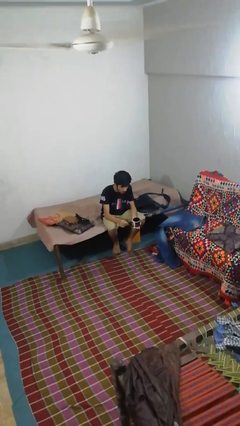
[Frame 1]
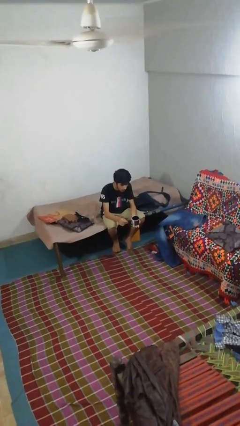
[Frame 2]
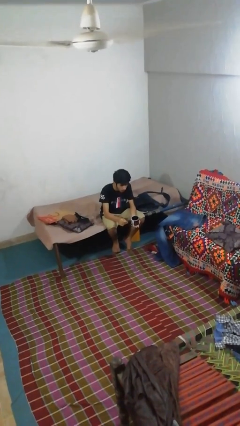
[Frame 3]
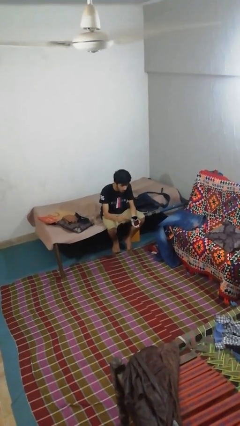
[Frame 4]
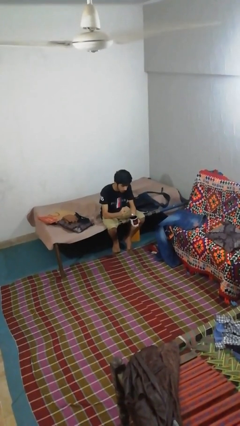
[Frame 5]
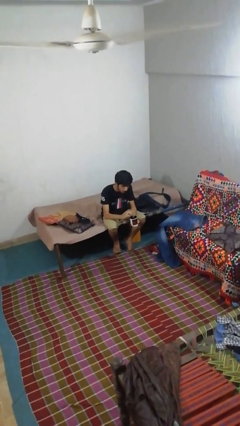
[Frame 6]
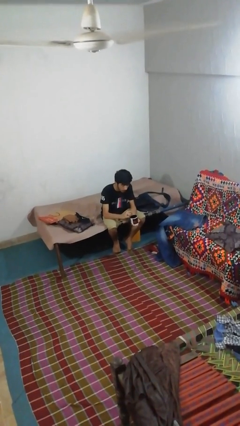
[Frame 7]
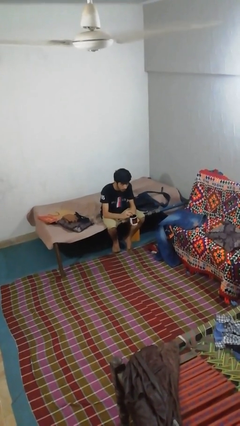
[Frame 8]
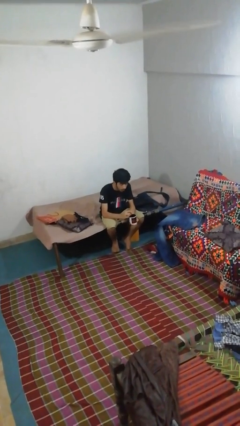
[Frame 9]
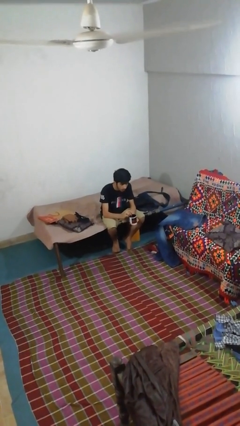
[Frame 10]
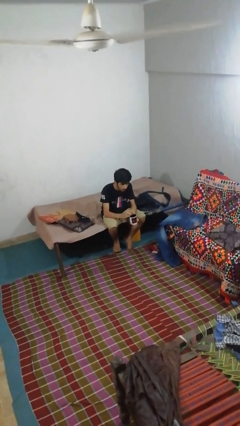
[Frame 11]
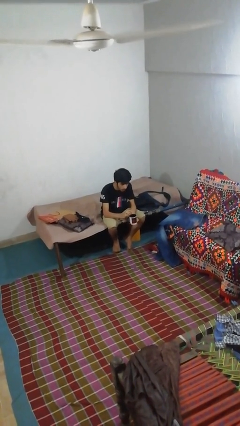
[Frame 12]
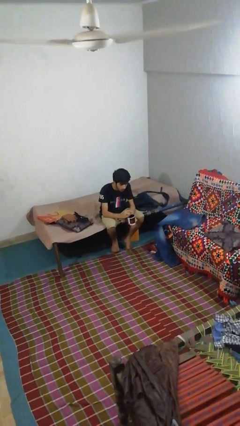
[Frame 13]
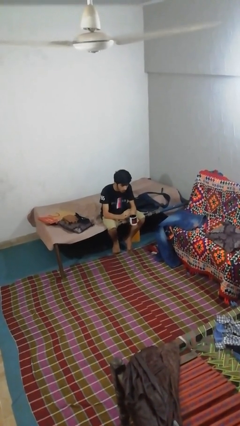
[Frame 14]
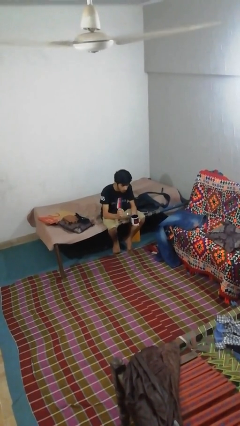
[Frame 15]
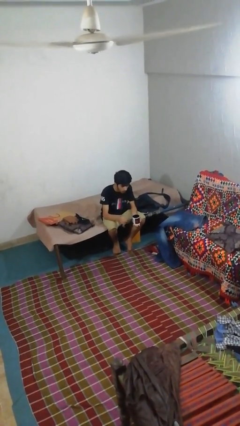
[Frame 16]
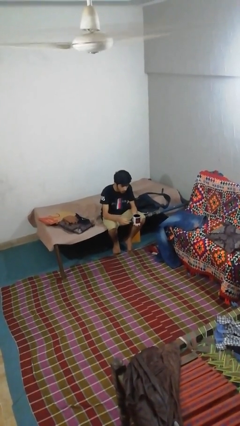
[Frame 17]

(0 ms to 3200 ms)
person stirs mug

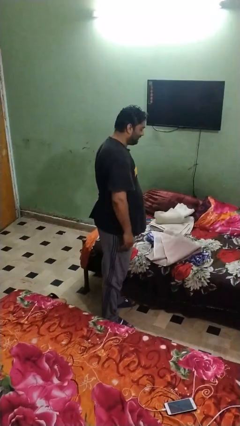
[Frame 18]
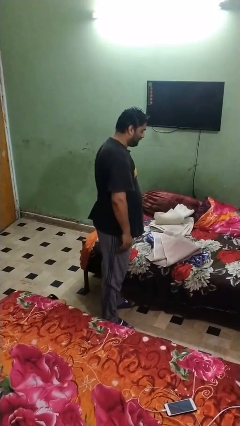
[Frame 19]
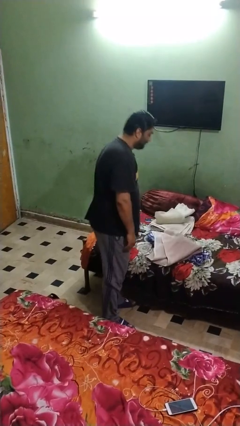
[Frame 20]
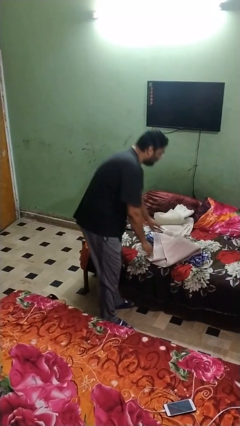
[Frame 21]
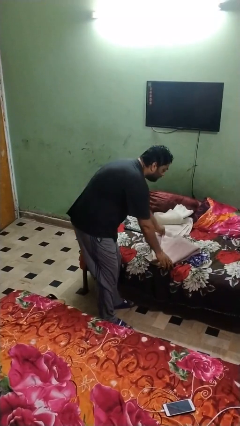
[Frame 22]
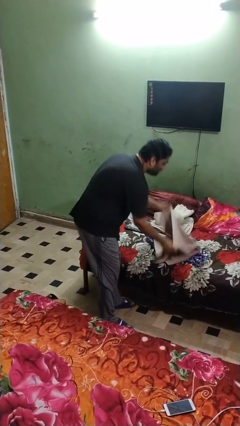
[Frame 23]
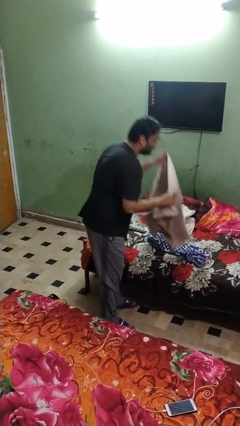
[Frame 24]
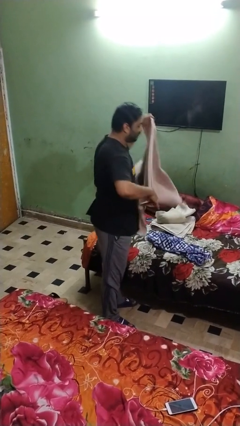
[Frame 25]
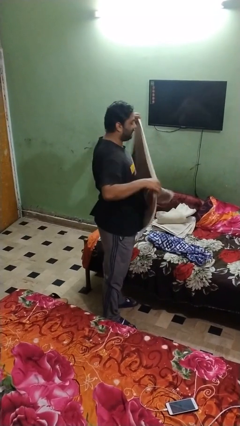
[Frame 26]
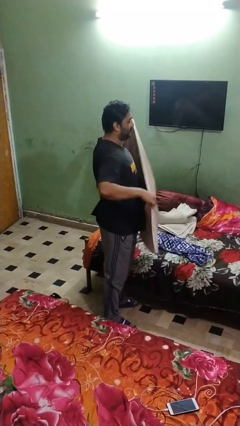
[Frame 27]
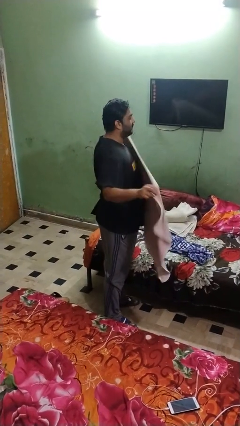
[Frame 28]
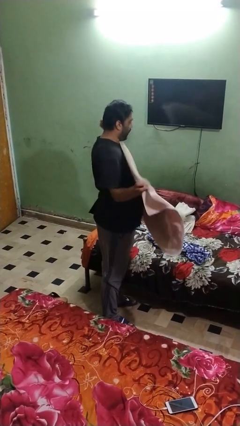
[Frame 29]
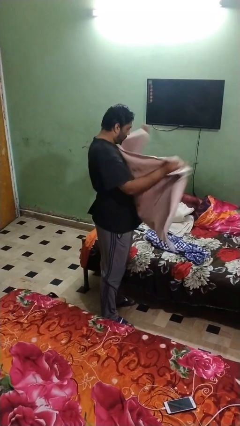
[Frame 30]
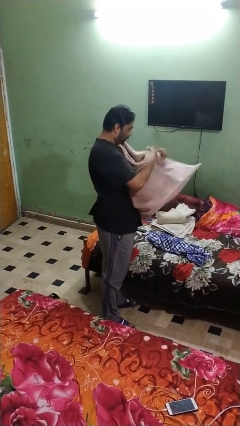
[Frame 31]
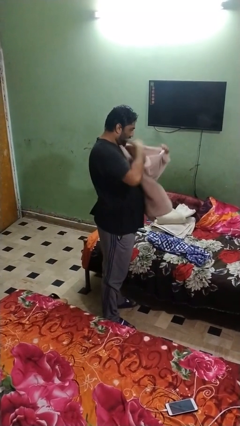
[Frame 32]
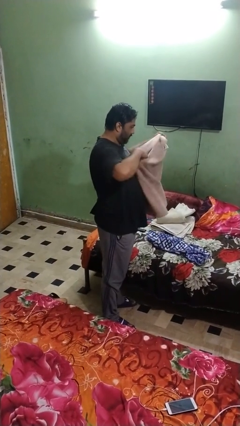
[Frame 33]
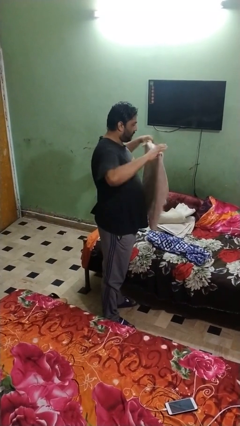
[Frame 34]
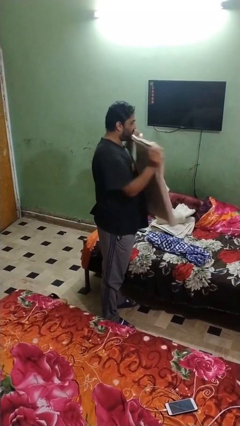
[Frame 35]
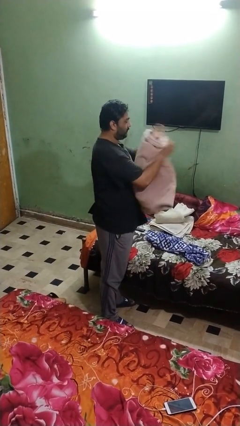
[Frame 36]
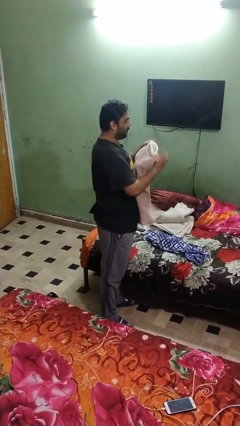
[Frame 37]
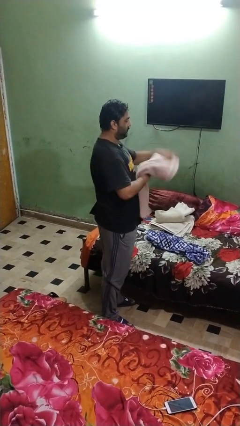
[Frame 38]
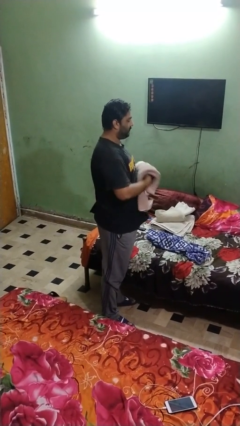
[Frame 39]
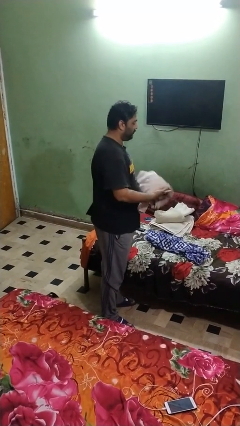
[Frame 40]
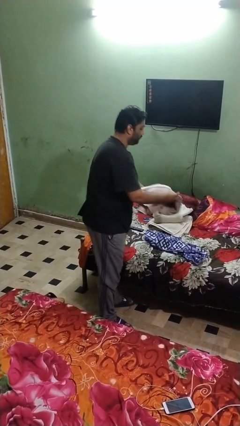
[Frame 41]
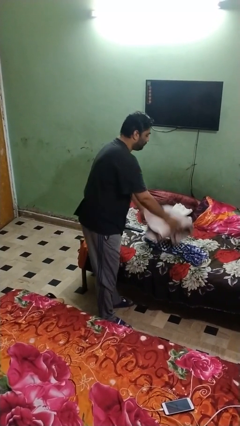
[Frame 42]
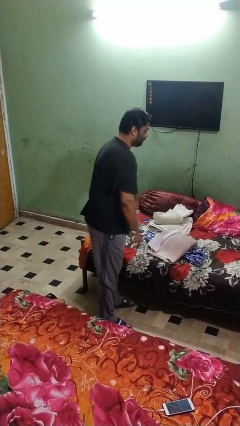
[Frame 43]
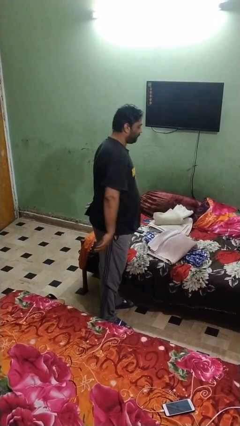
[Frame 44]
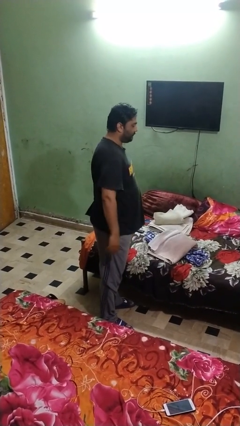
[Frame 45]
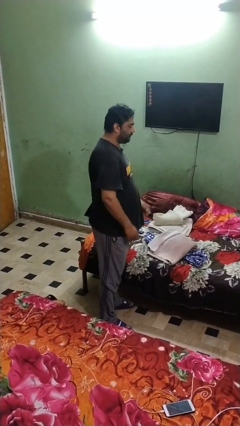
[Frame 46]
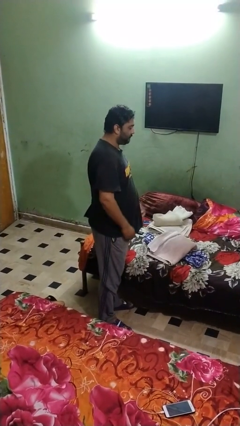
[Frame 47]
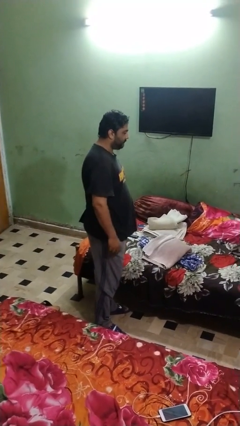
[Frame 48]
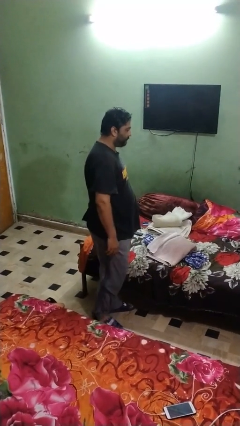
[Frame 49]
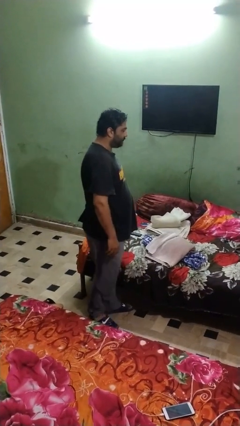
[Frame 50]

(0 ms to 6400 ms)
person folds towel

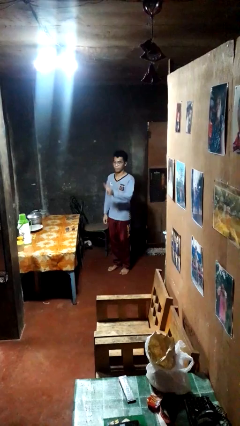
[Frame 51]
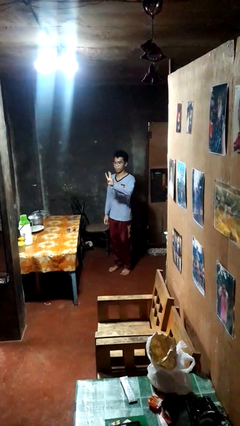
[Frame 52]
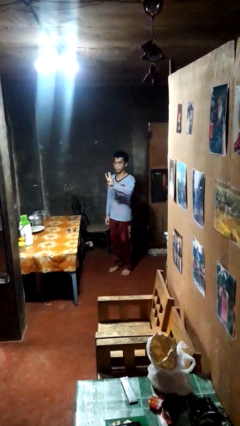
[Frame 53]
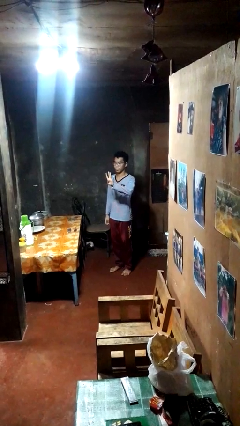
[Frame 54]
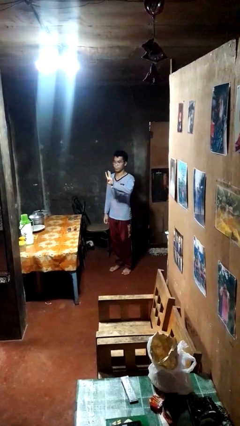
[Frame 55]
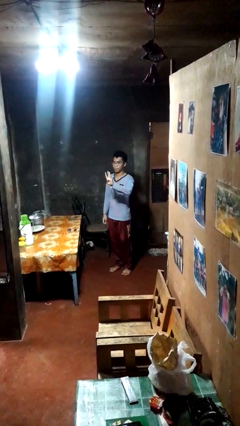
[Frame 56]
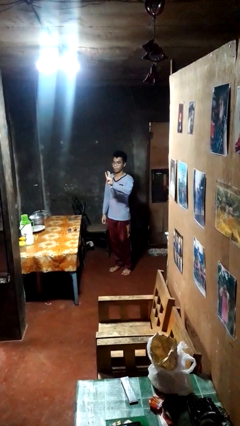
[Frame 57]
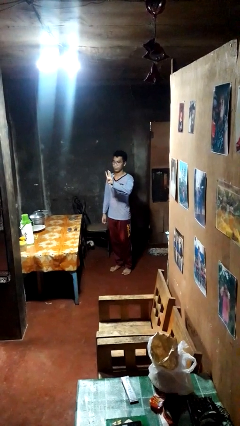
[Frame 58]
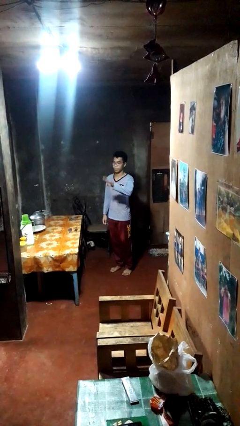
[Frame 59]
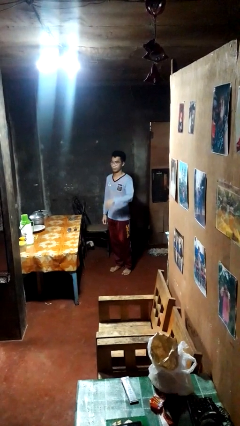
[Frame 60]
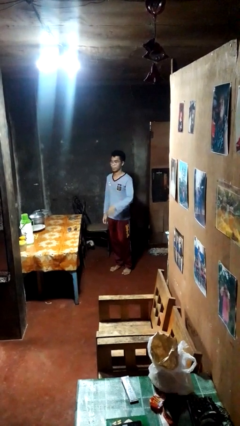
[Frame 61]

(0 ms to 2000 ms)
person gestures number four

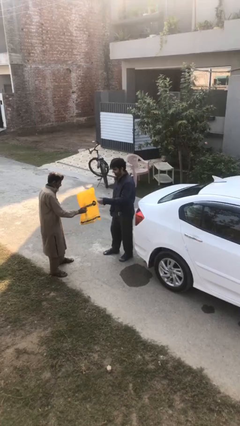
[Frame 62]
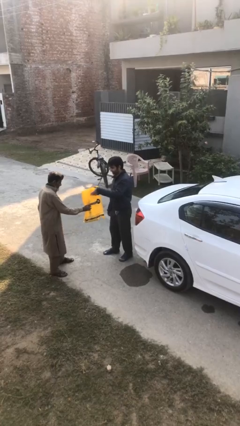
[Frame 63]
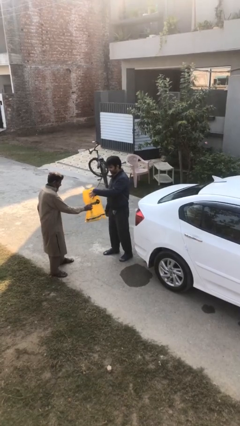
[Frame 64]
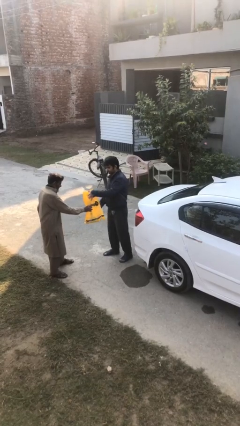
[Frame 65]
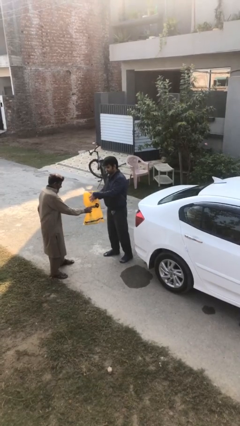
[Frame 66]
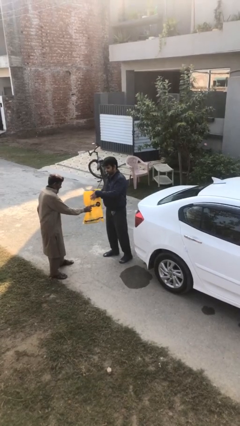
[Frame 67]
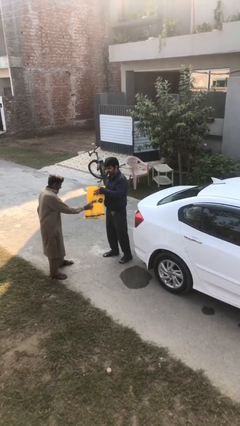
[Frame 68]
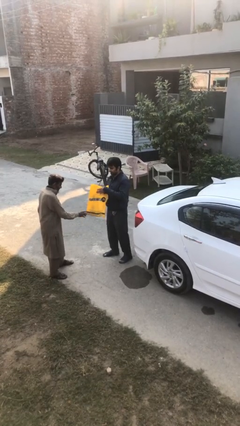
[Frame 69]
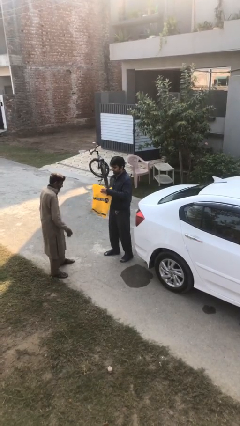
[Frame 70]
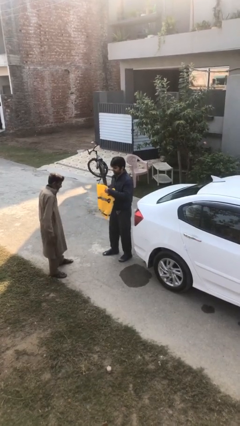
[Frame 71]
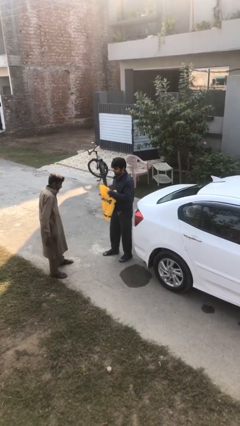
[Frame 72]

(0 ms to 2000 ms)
person transfers object to person

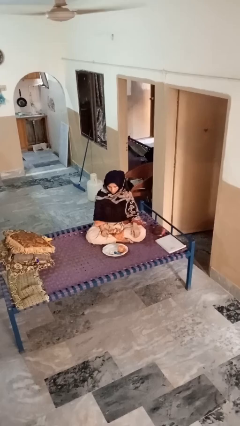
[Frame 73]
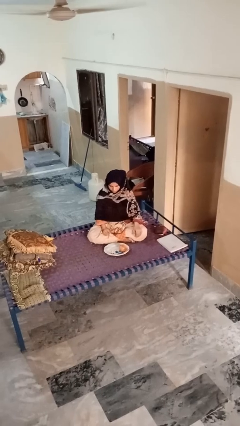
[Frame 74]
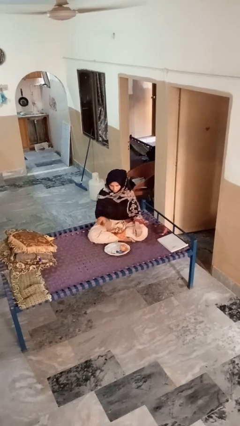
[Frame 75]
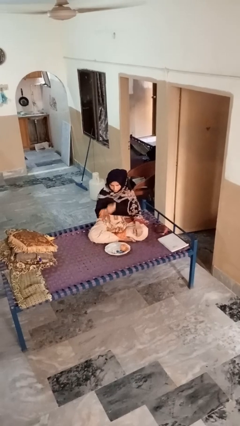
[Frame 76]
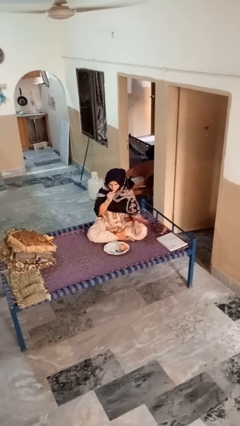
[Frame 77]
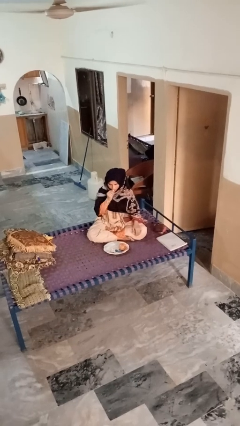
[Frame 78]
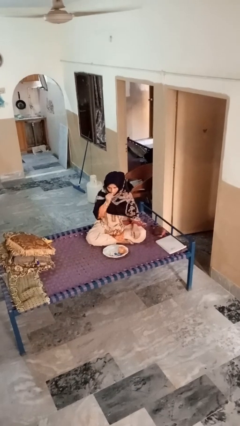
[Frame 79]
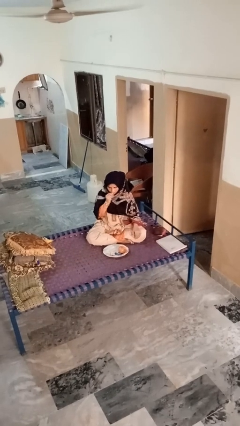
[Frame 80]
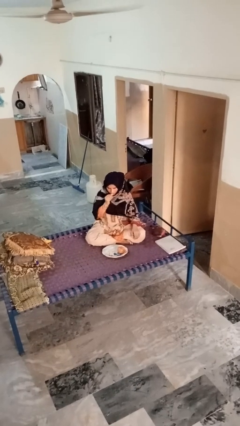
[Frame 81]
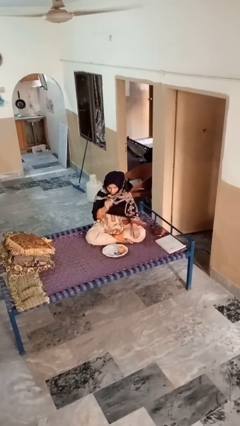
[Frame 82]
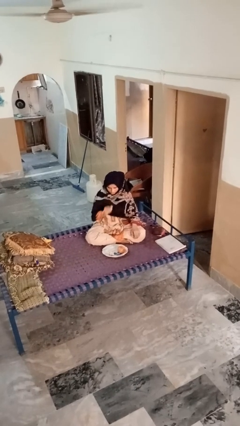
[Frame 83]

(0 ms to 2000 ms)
person eats apple

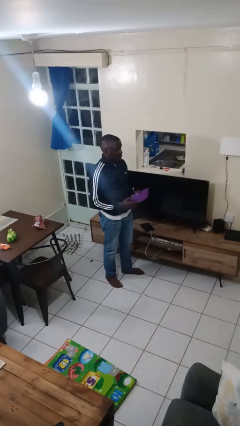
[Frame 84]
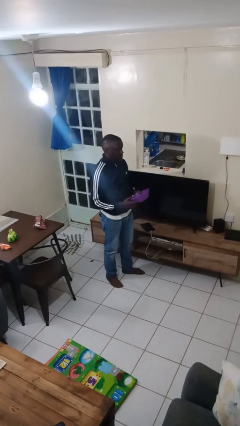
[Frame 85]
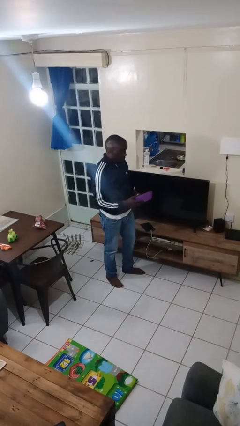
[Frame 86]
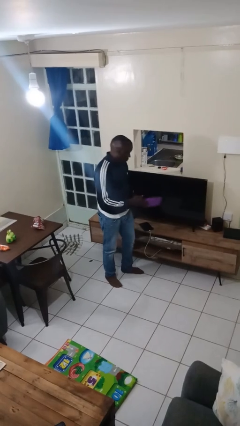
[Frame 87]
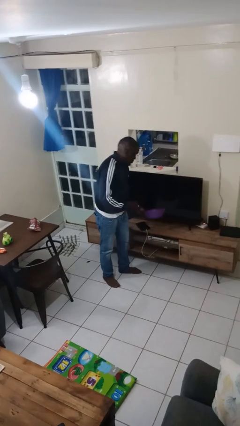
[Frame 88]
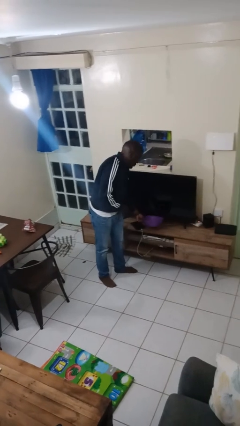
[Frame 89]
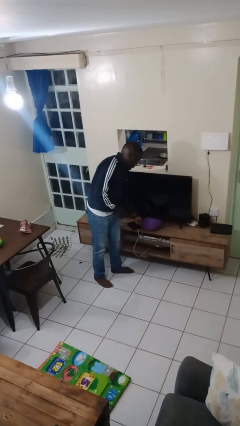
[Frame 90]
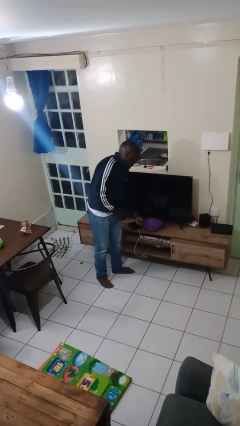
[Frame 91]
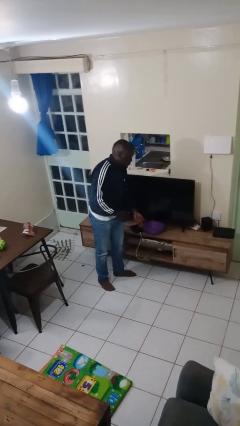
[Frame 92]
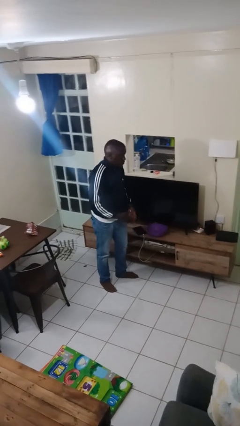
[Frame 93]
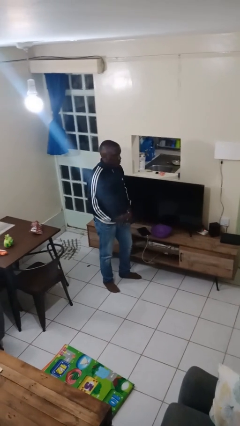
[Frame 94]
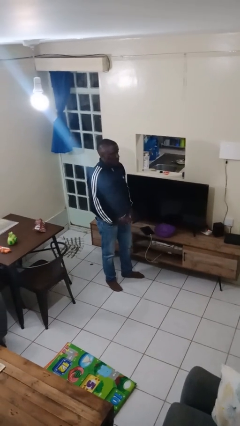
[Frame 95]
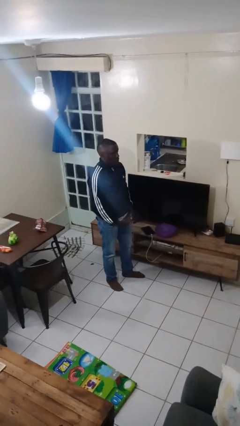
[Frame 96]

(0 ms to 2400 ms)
person puts down object on countertop
